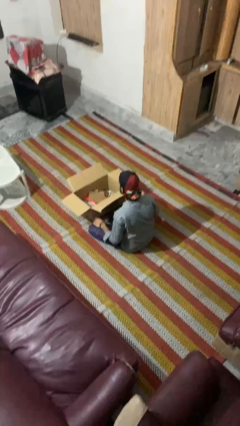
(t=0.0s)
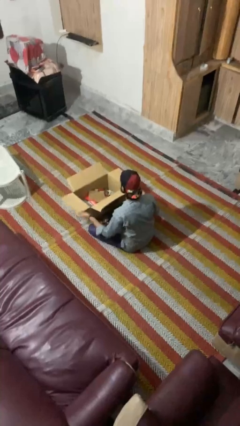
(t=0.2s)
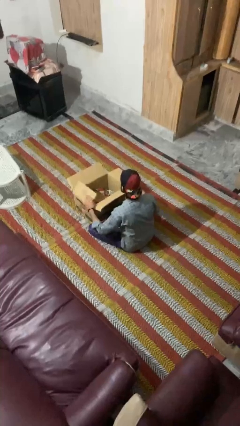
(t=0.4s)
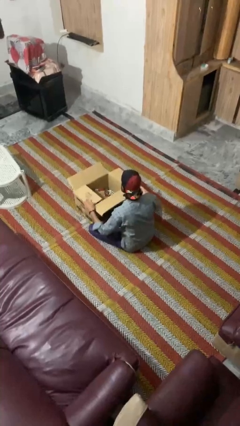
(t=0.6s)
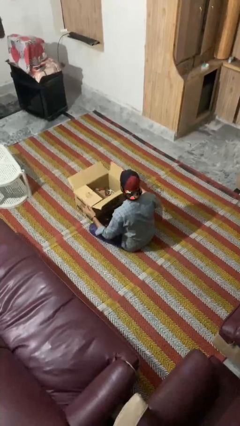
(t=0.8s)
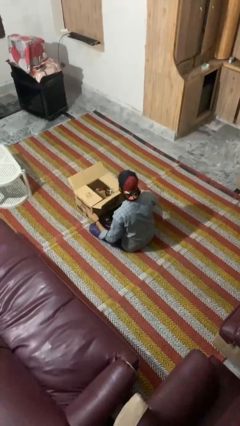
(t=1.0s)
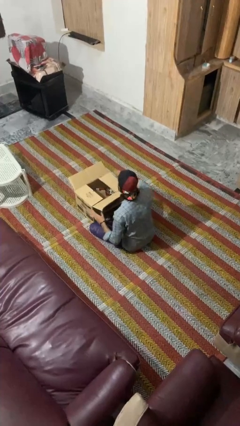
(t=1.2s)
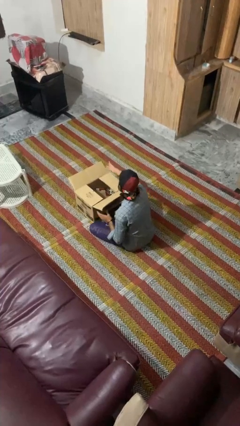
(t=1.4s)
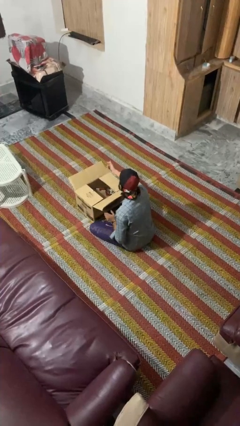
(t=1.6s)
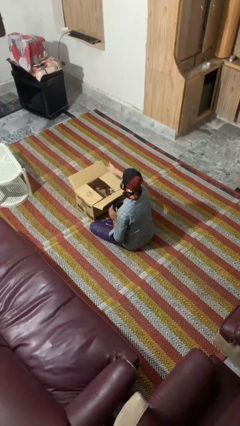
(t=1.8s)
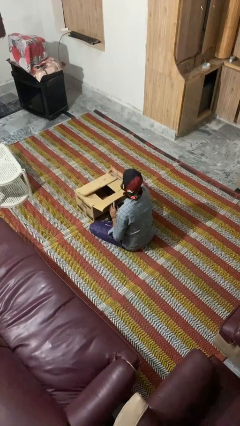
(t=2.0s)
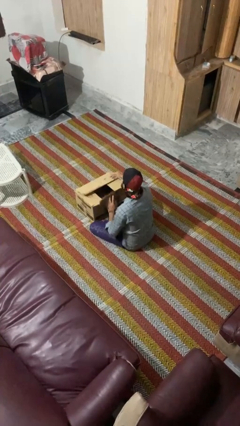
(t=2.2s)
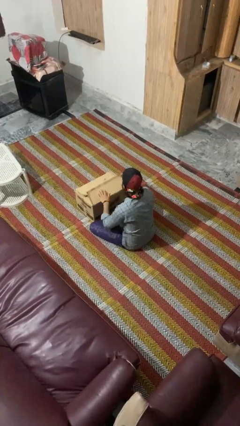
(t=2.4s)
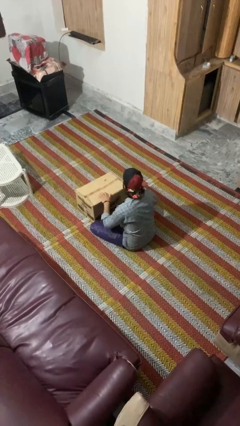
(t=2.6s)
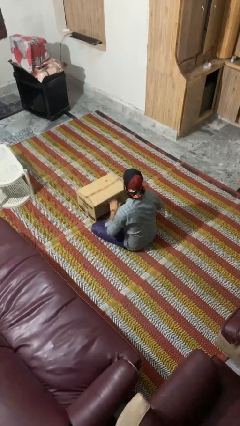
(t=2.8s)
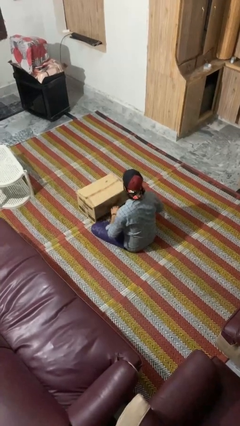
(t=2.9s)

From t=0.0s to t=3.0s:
person closes box

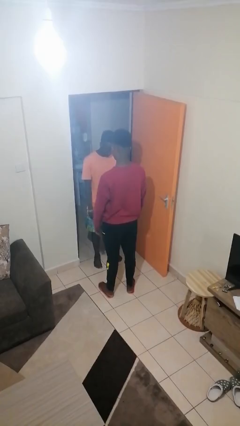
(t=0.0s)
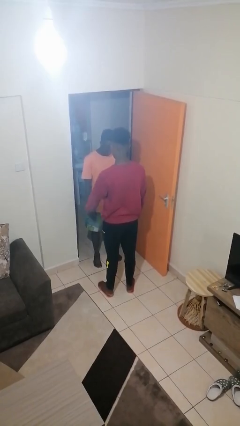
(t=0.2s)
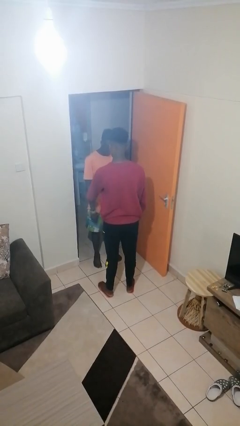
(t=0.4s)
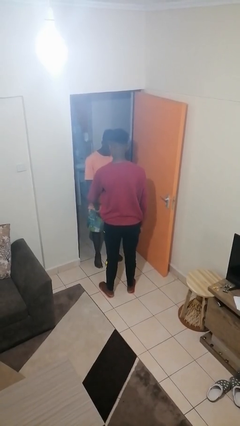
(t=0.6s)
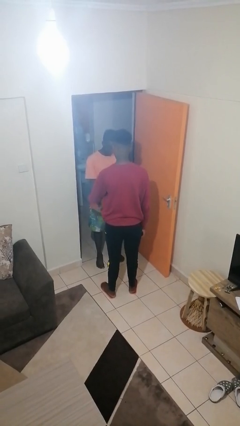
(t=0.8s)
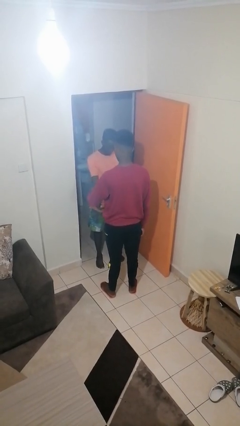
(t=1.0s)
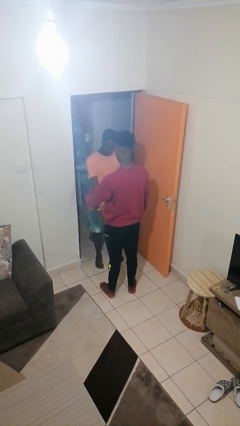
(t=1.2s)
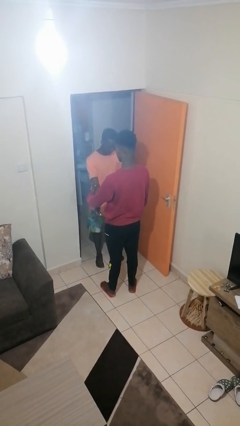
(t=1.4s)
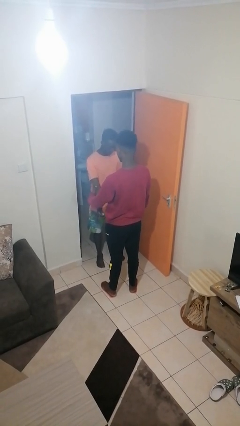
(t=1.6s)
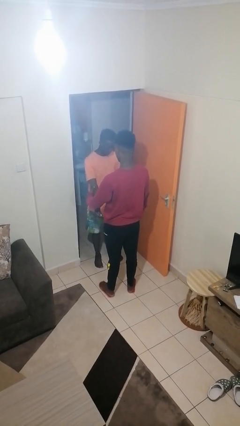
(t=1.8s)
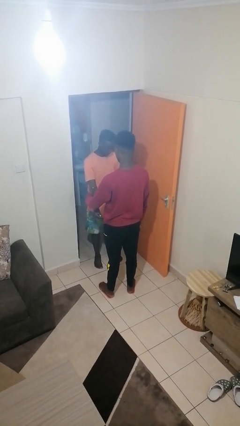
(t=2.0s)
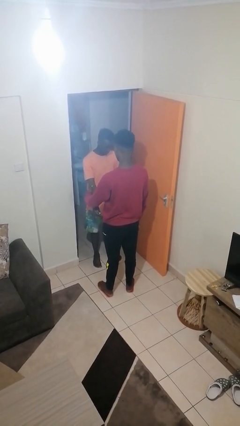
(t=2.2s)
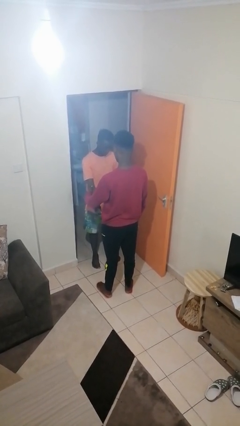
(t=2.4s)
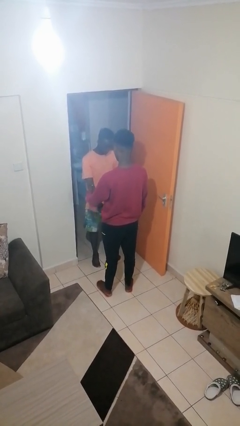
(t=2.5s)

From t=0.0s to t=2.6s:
person grabs person by forearm

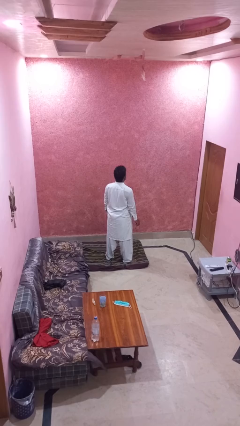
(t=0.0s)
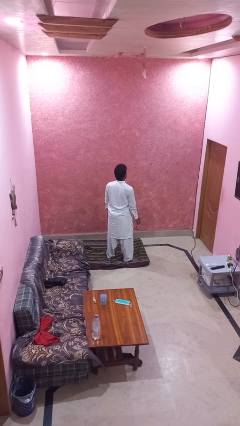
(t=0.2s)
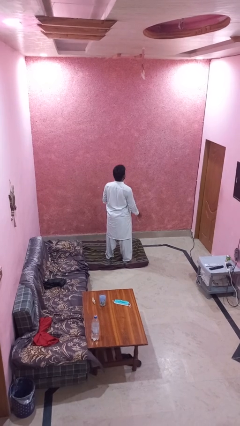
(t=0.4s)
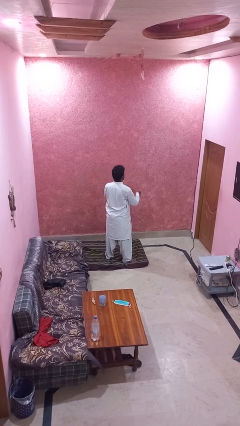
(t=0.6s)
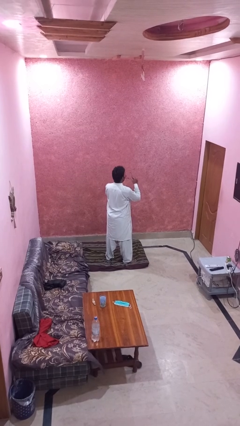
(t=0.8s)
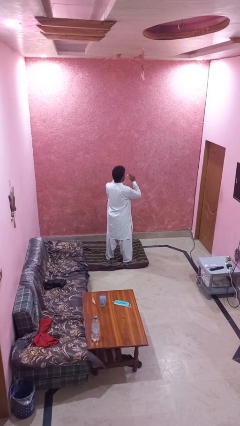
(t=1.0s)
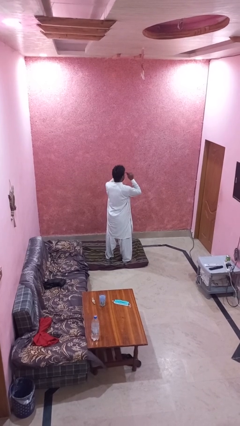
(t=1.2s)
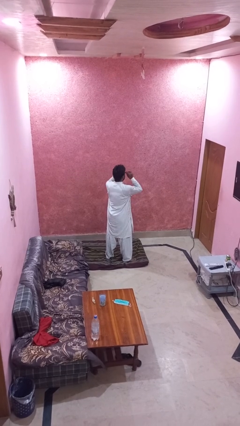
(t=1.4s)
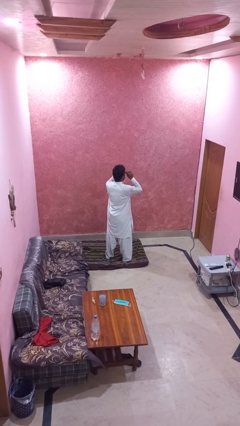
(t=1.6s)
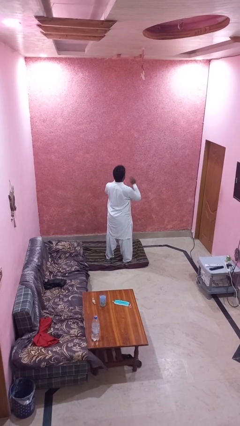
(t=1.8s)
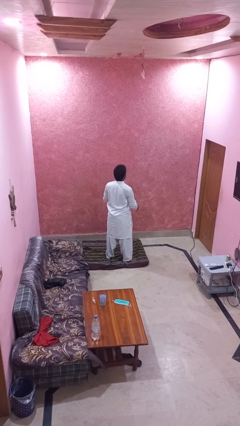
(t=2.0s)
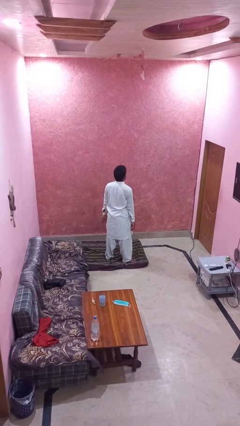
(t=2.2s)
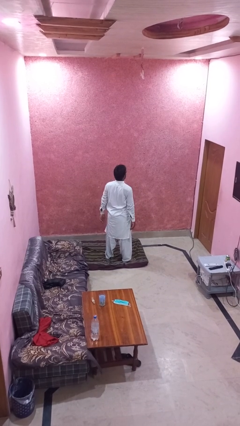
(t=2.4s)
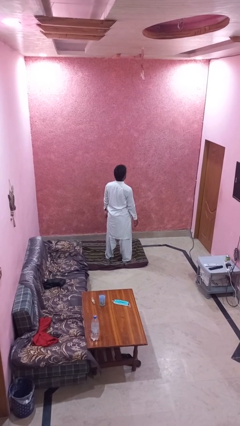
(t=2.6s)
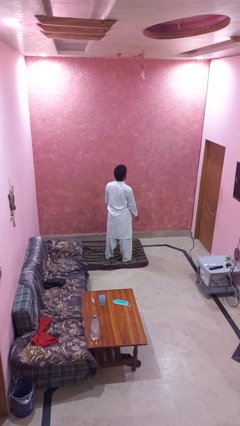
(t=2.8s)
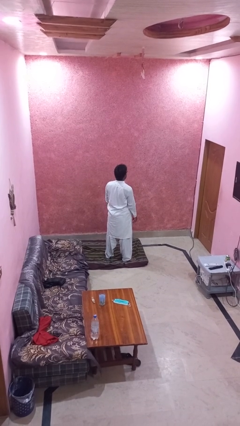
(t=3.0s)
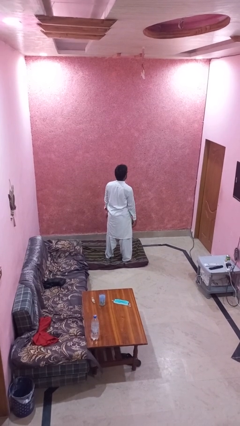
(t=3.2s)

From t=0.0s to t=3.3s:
person puts on glasses

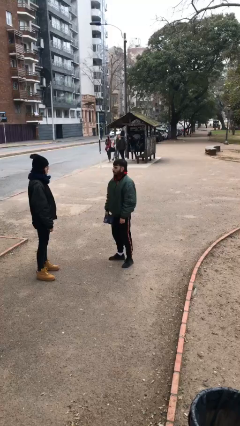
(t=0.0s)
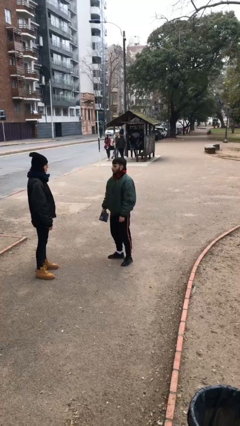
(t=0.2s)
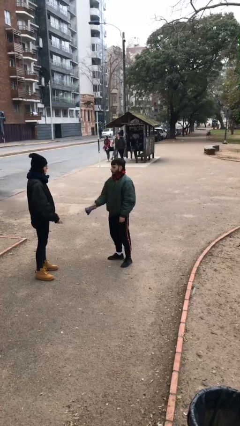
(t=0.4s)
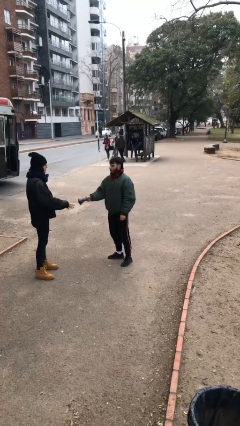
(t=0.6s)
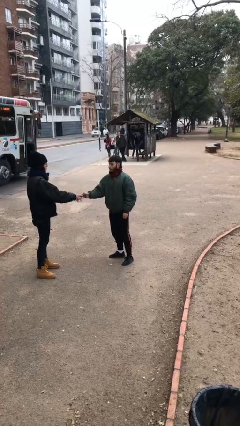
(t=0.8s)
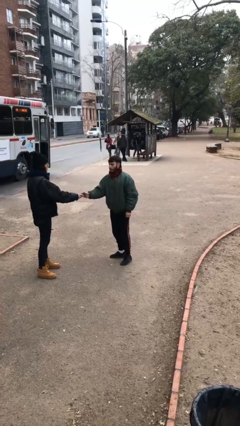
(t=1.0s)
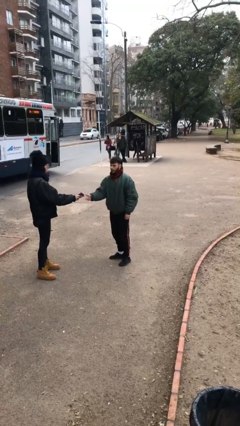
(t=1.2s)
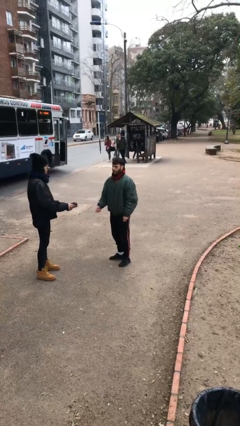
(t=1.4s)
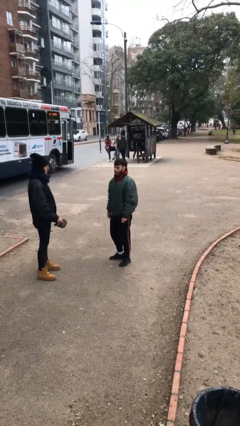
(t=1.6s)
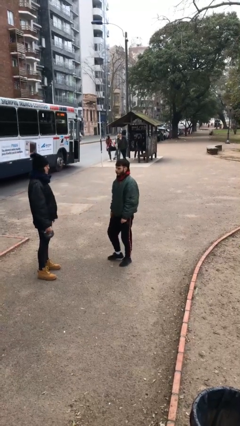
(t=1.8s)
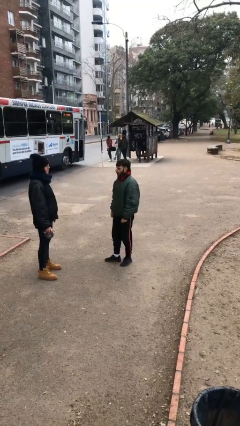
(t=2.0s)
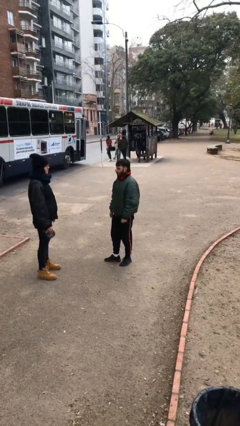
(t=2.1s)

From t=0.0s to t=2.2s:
person transfers object to person

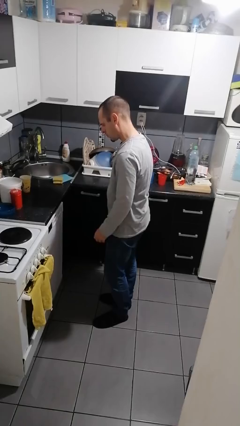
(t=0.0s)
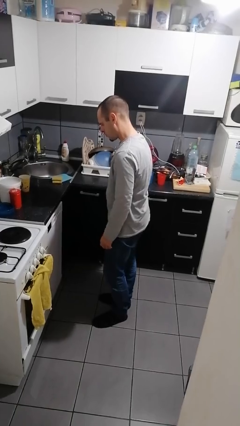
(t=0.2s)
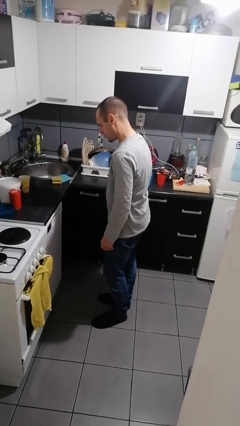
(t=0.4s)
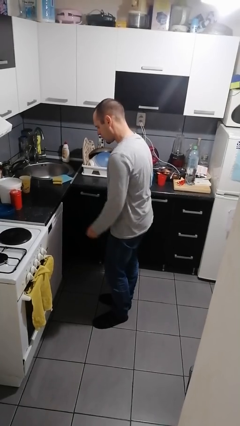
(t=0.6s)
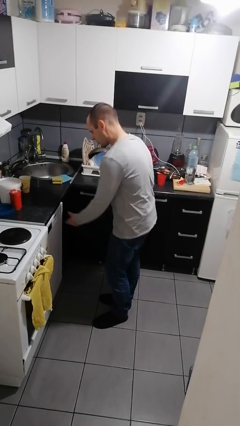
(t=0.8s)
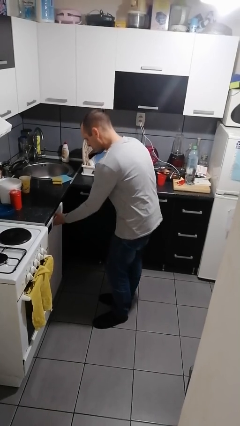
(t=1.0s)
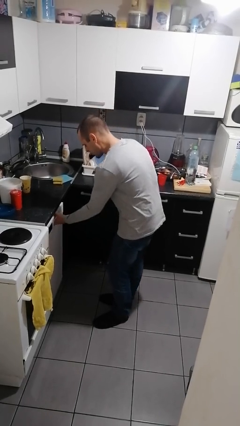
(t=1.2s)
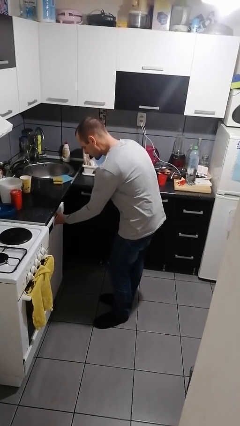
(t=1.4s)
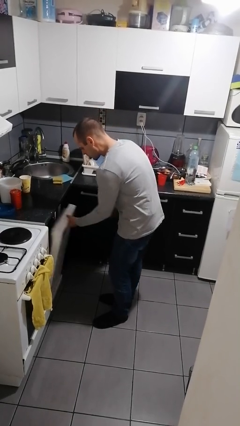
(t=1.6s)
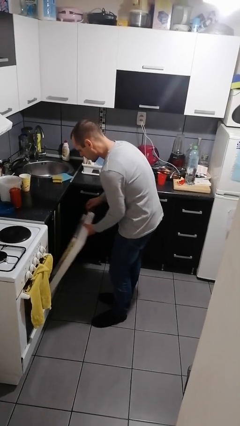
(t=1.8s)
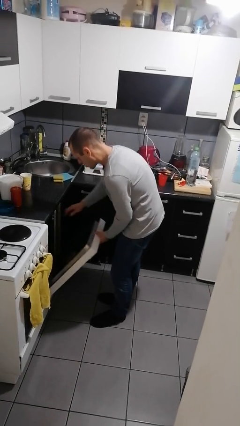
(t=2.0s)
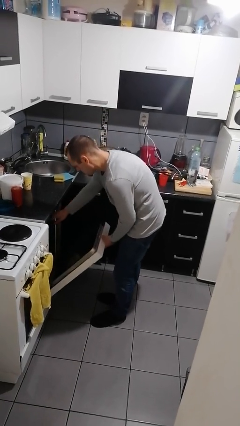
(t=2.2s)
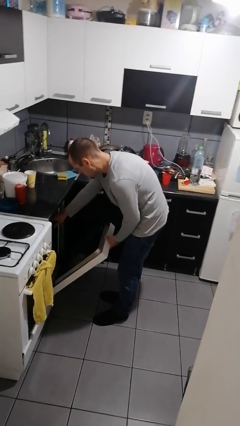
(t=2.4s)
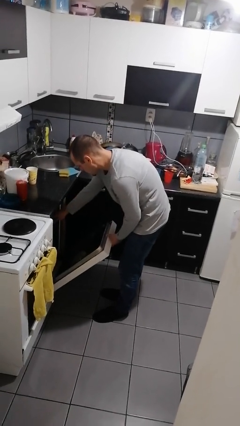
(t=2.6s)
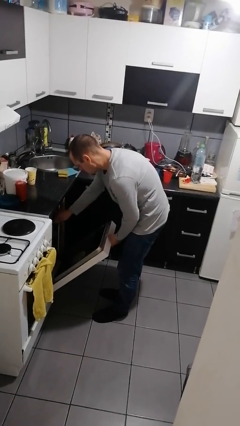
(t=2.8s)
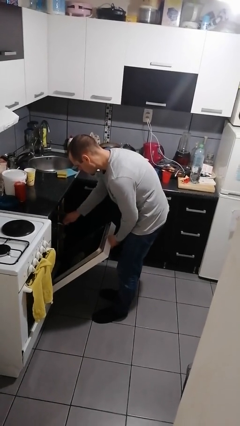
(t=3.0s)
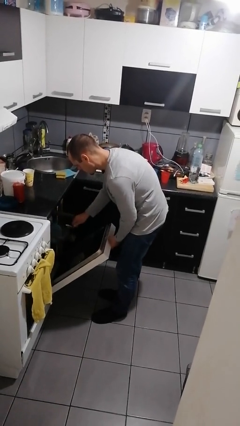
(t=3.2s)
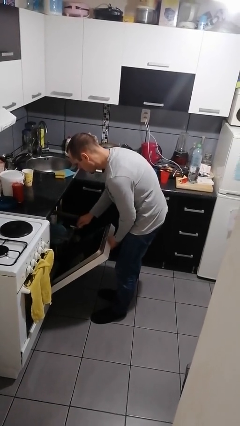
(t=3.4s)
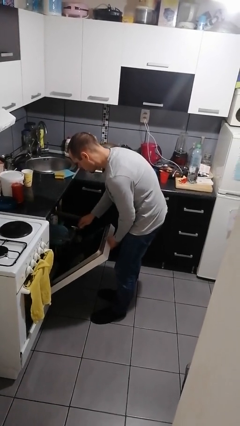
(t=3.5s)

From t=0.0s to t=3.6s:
person opens dishwasher

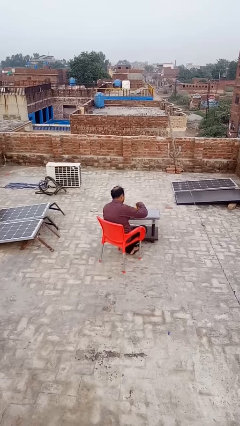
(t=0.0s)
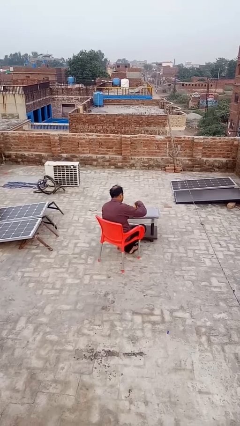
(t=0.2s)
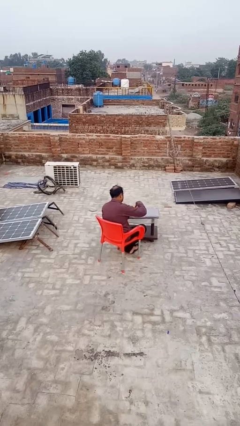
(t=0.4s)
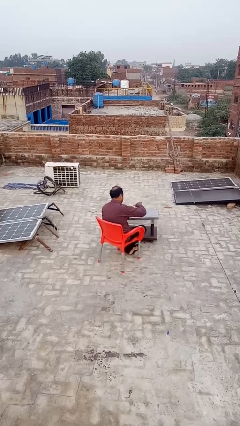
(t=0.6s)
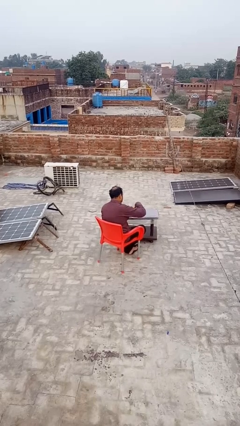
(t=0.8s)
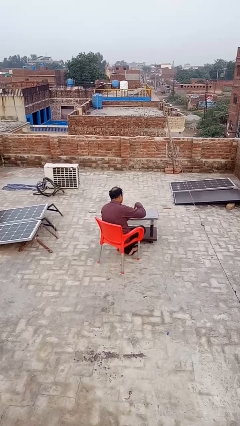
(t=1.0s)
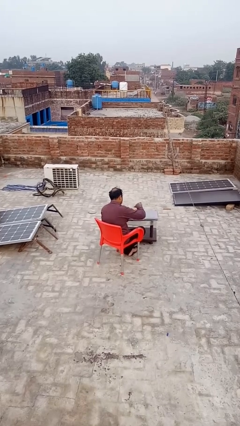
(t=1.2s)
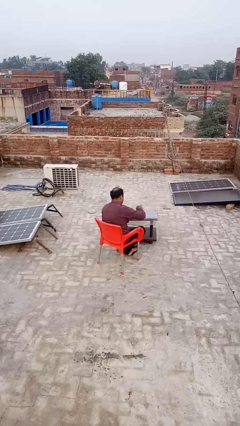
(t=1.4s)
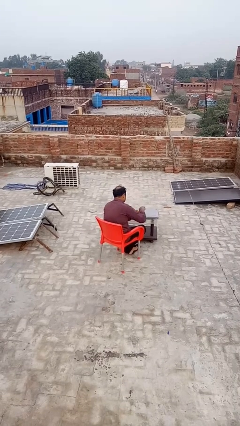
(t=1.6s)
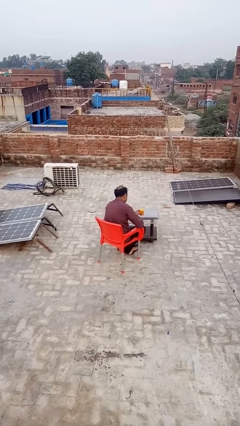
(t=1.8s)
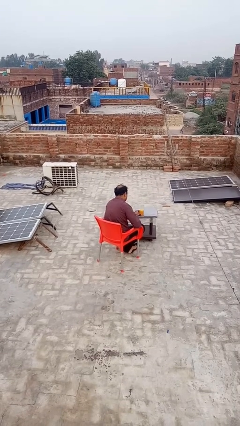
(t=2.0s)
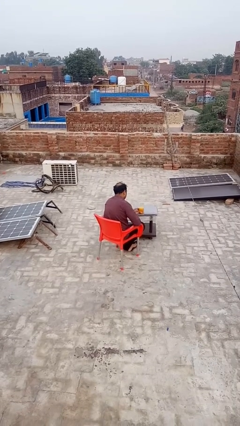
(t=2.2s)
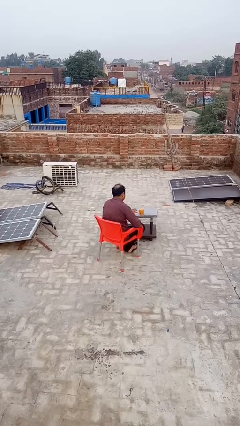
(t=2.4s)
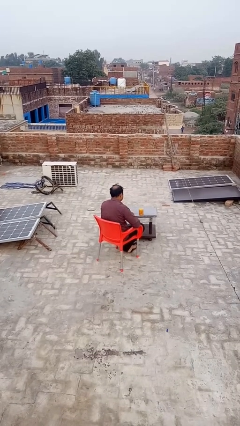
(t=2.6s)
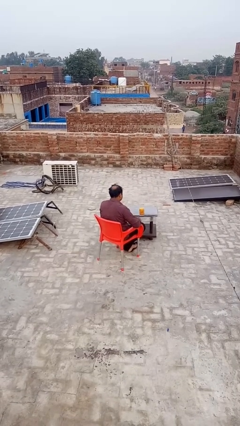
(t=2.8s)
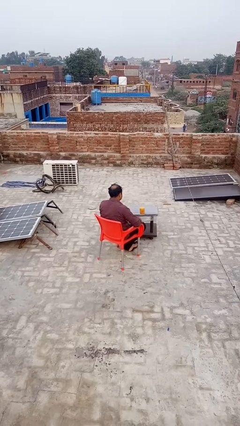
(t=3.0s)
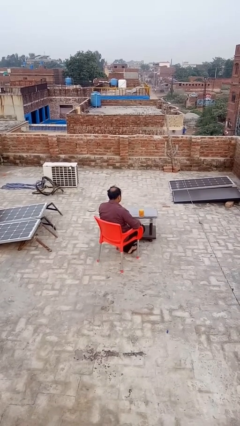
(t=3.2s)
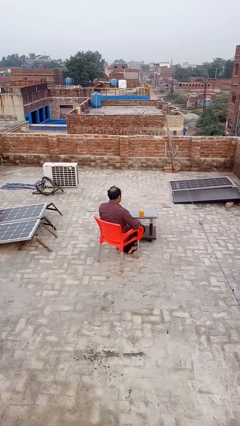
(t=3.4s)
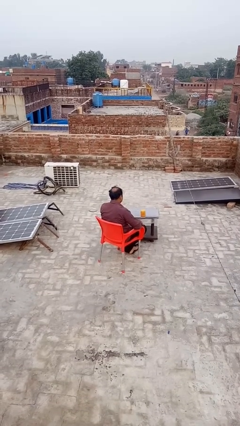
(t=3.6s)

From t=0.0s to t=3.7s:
person closes jar
